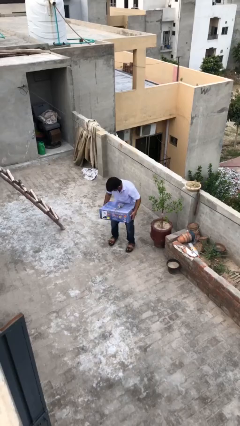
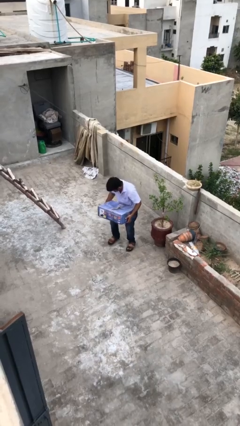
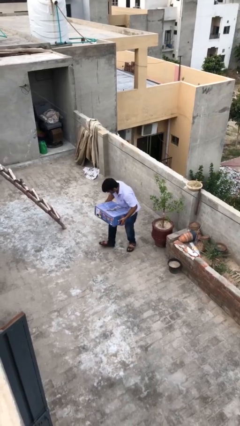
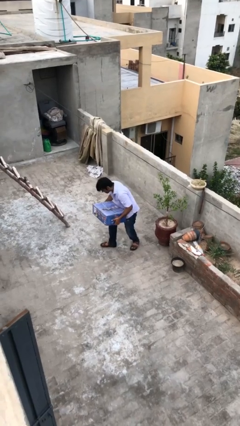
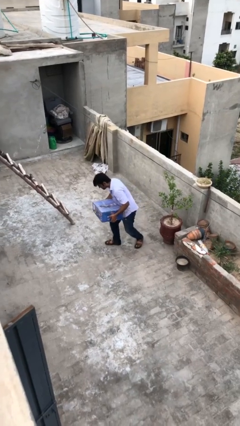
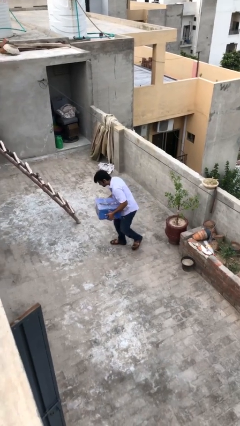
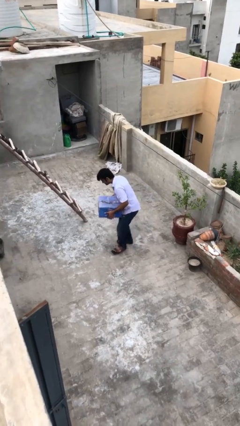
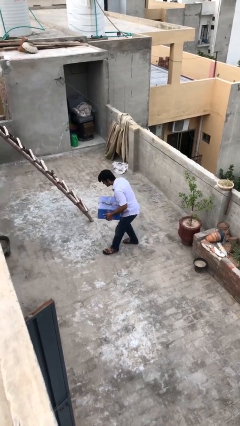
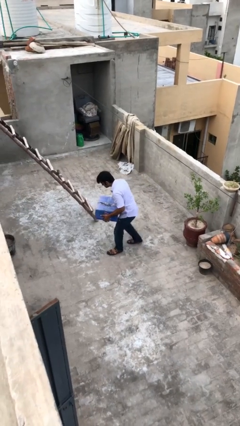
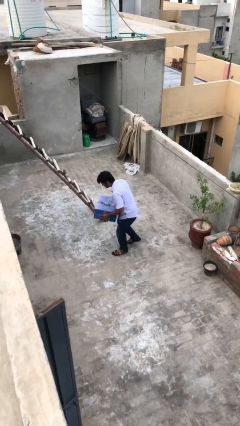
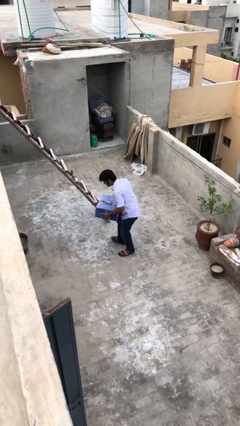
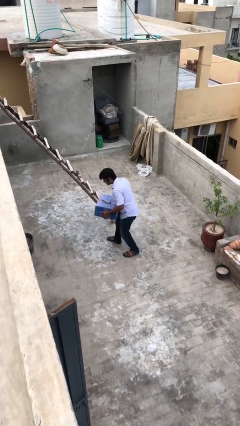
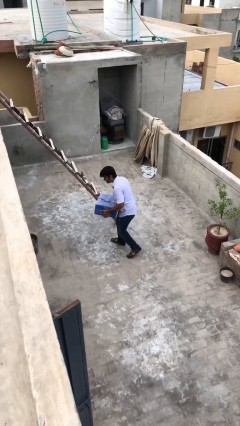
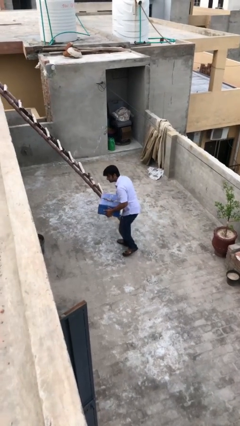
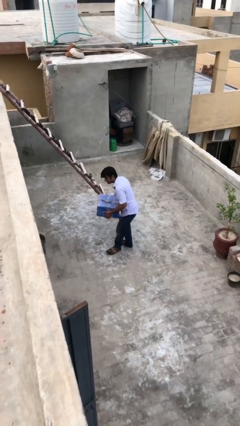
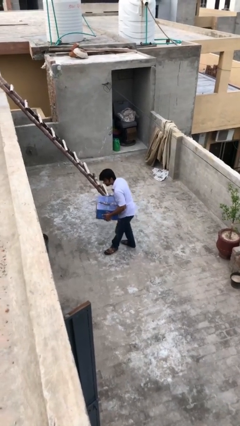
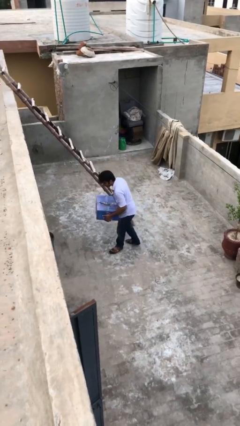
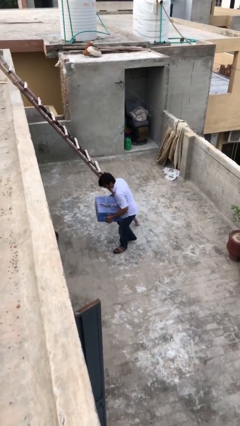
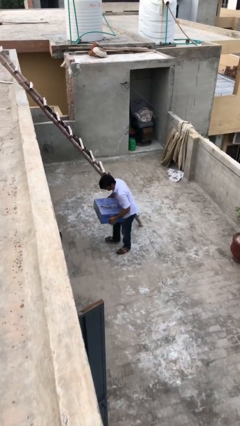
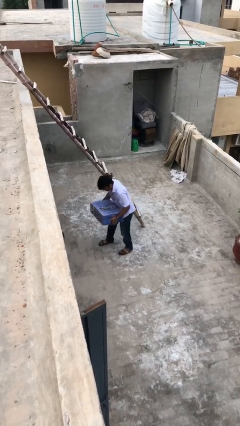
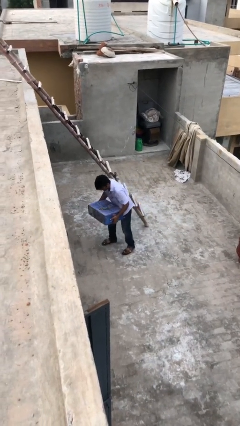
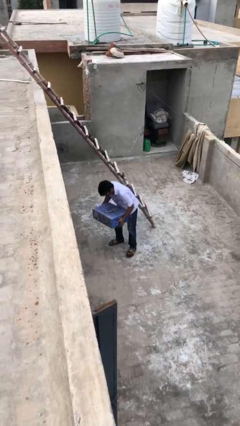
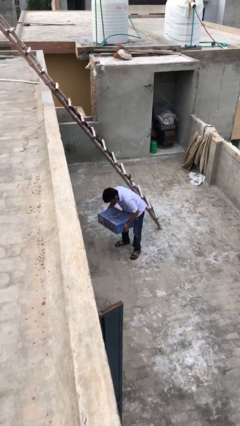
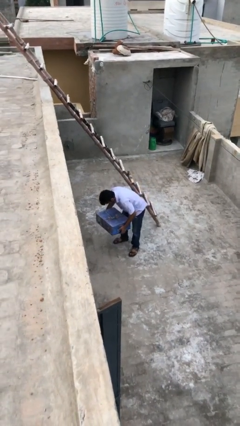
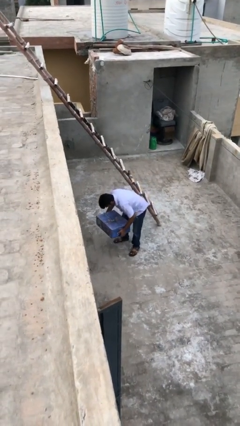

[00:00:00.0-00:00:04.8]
person carries heavy object

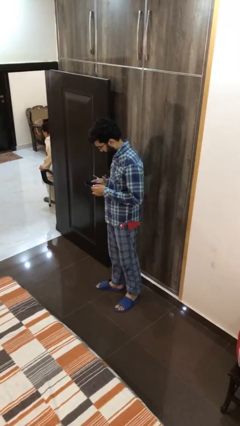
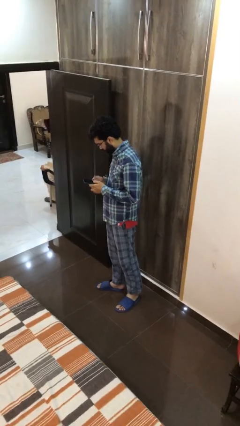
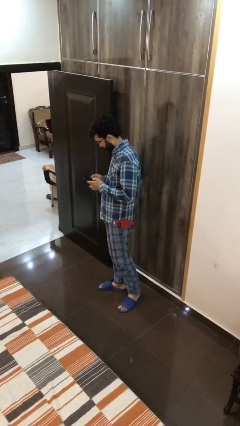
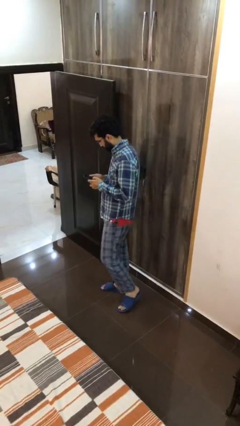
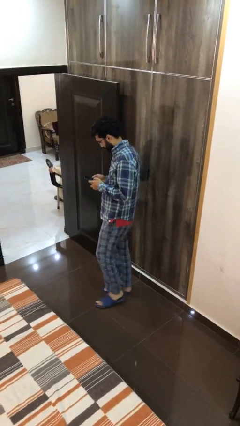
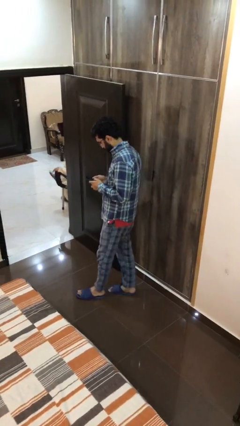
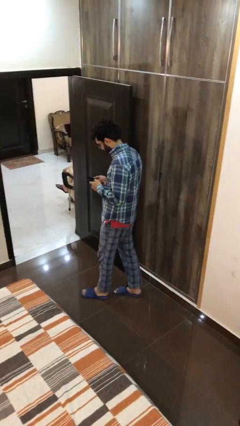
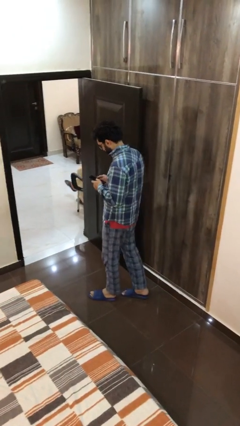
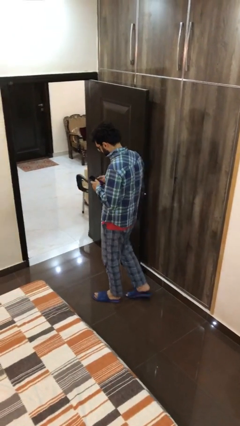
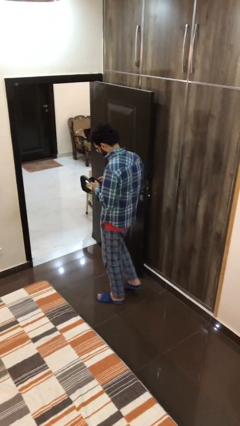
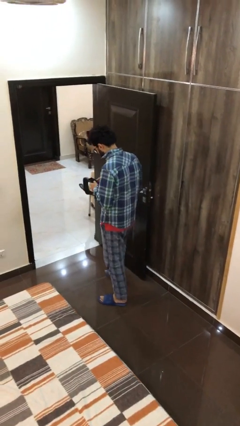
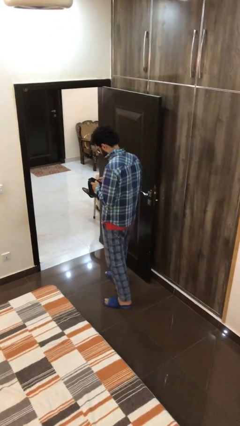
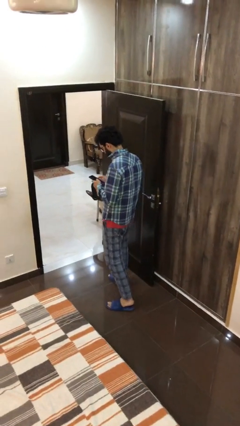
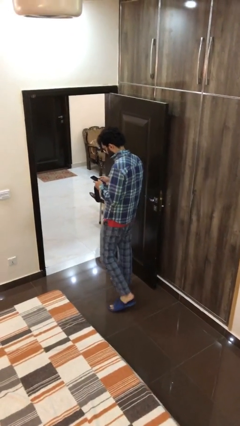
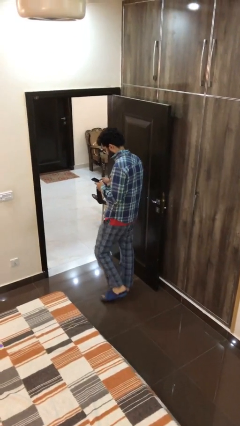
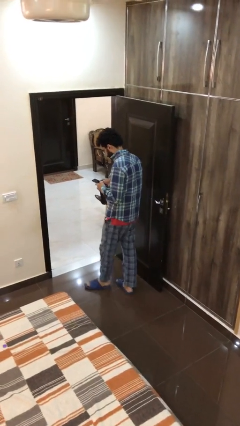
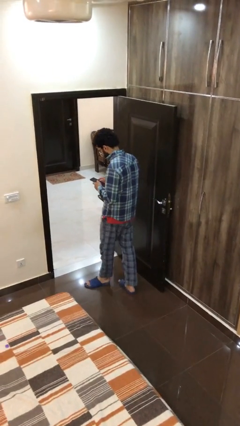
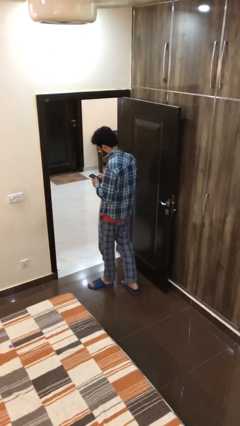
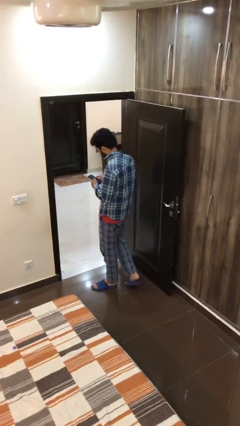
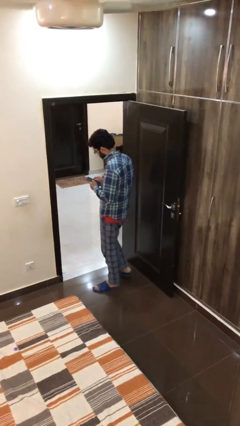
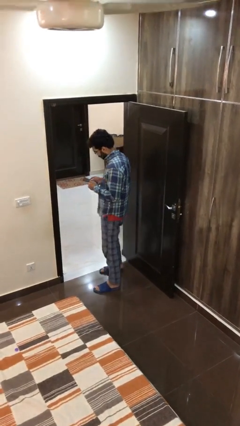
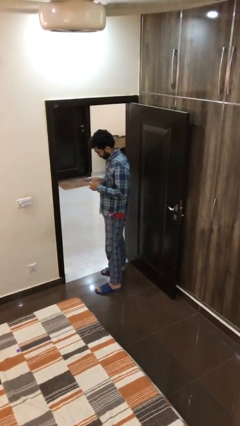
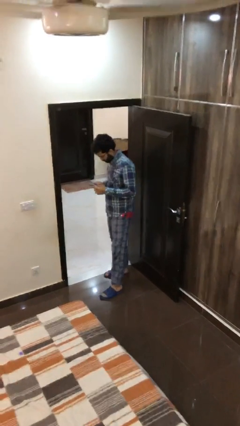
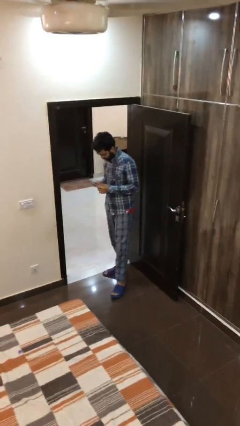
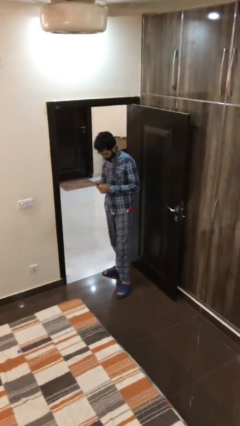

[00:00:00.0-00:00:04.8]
person texts on phone

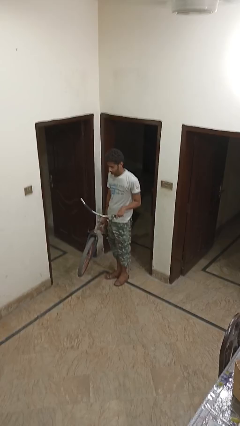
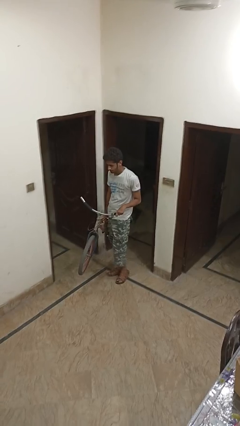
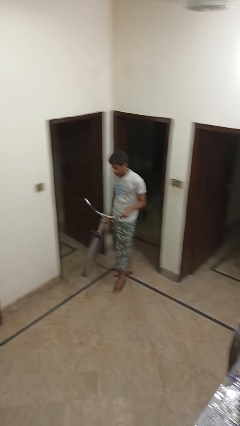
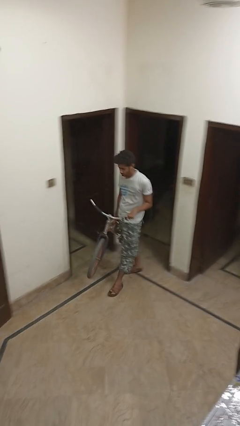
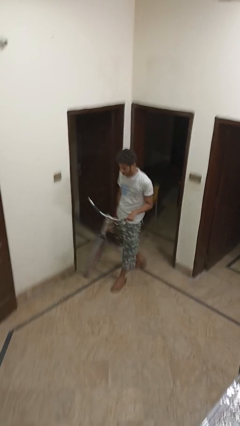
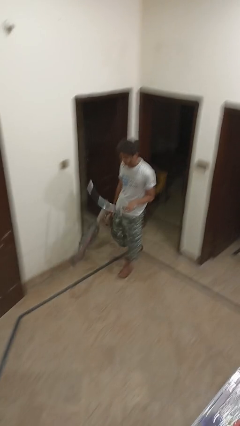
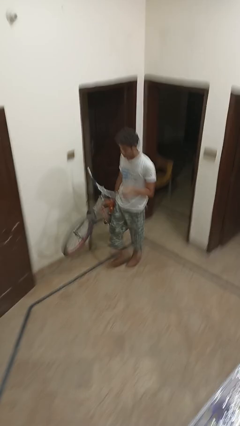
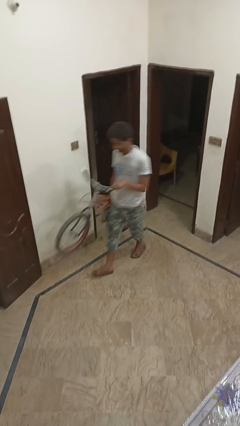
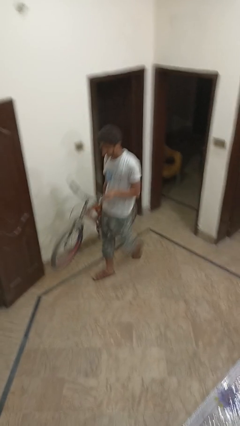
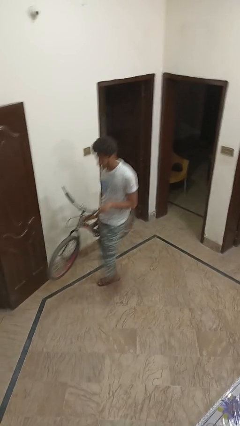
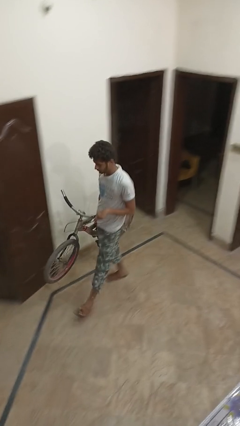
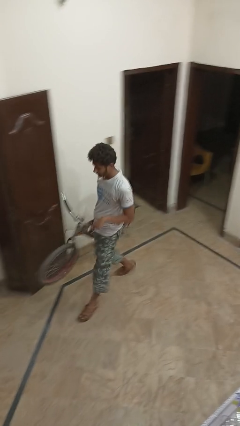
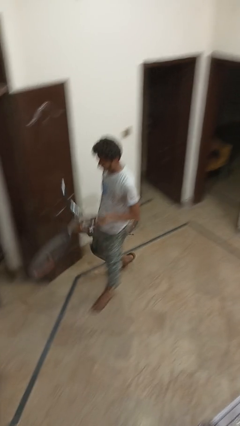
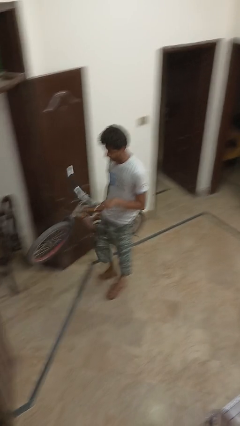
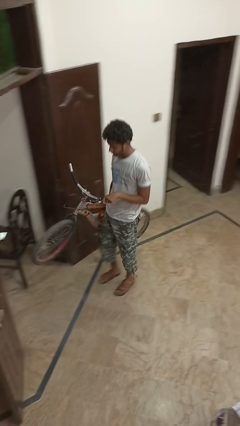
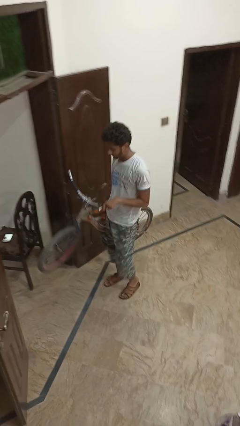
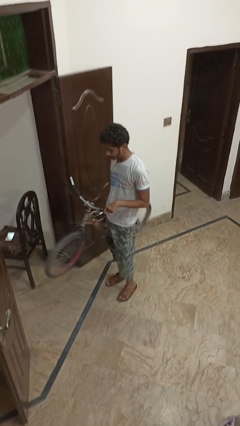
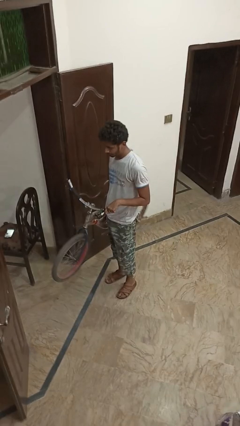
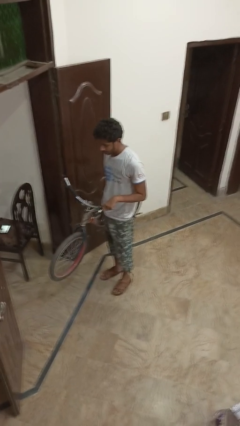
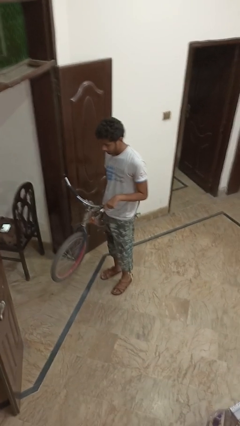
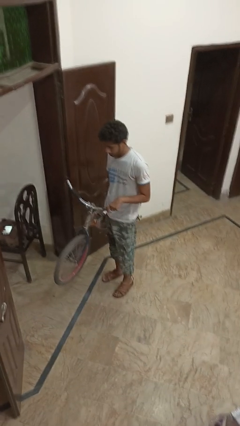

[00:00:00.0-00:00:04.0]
person carries bicycle

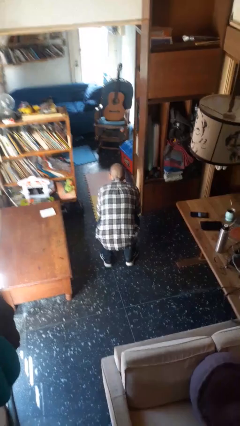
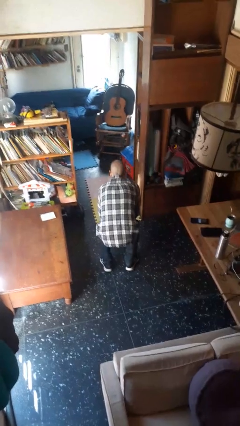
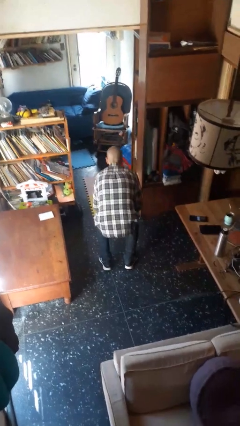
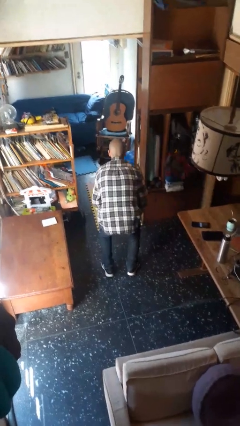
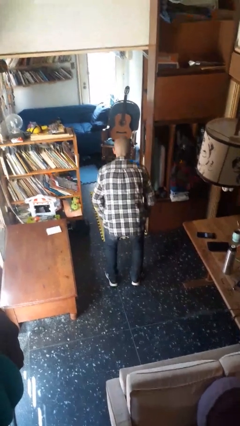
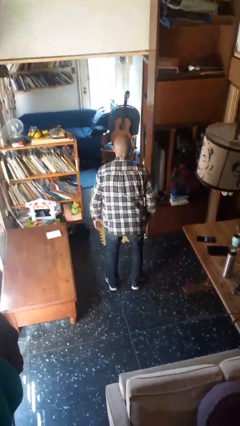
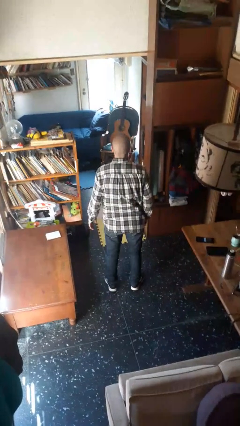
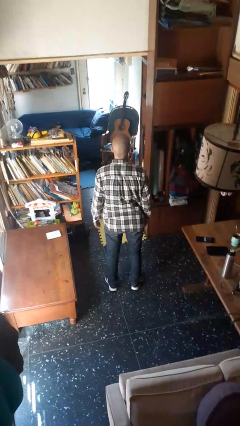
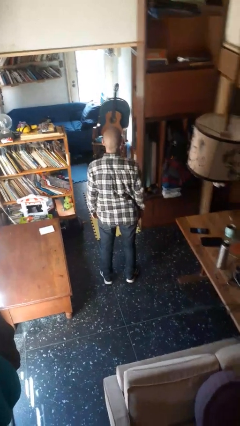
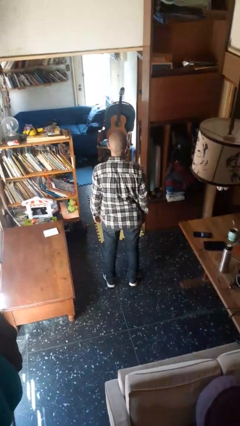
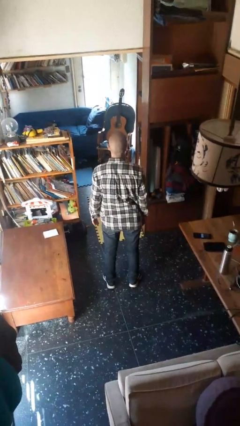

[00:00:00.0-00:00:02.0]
person stands up

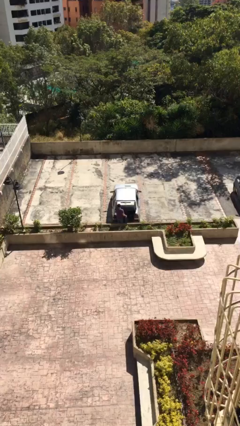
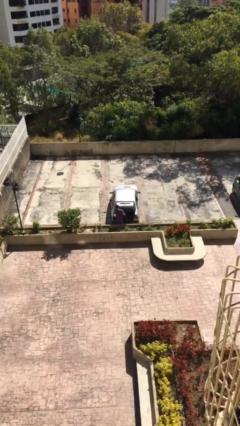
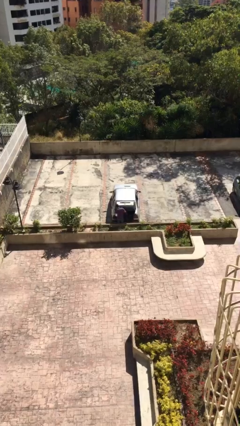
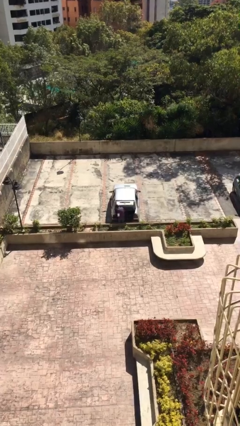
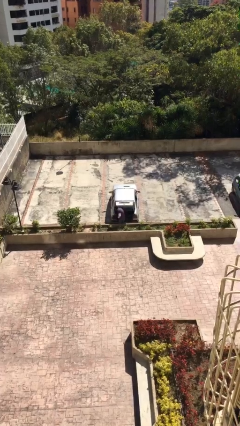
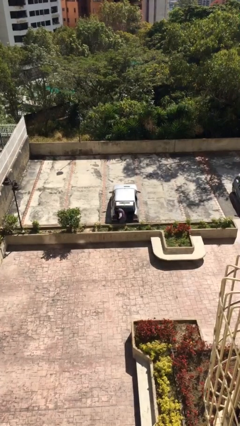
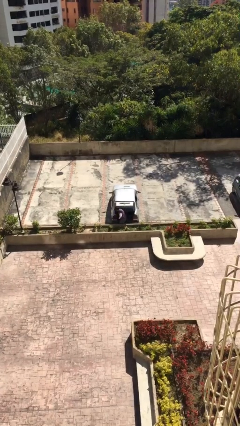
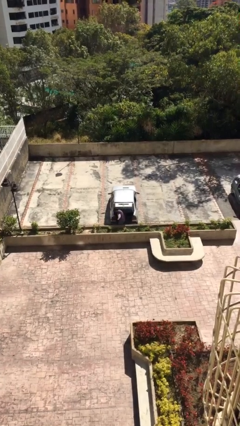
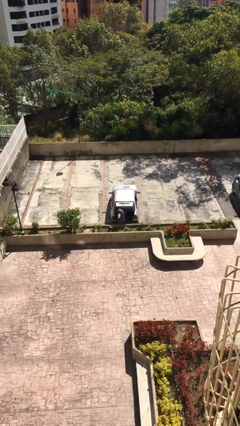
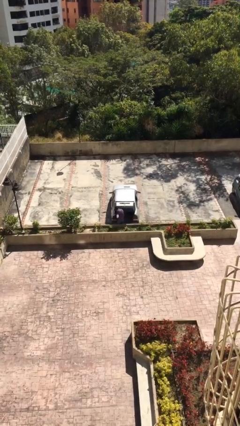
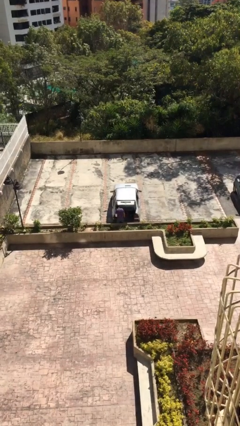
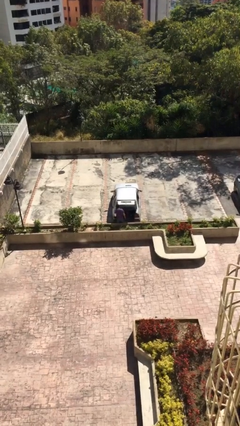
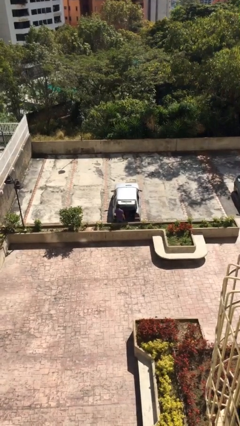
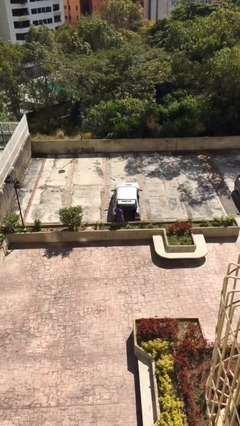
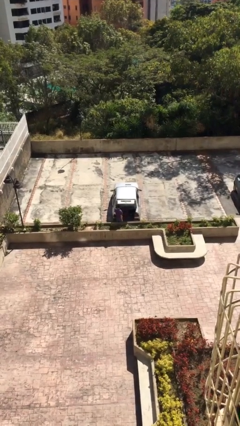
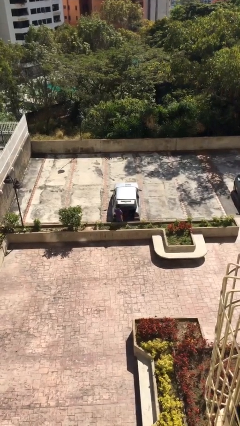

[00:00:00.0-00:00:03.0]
person loads car
